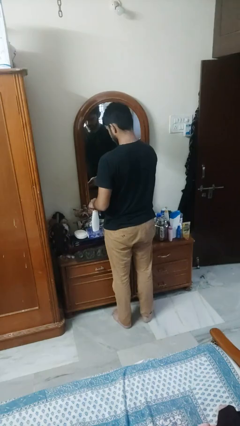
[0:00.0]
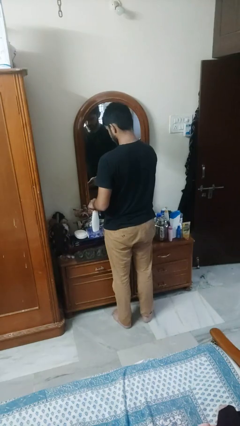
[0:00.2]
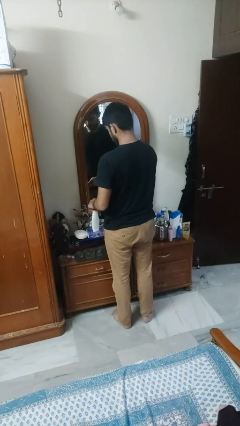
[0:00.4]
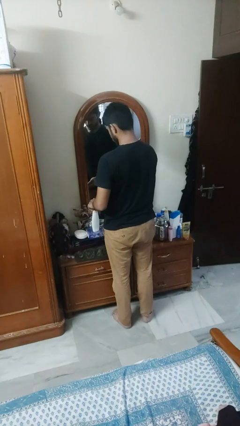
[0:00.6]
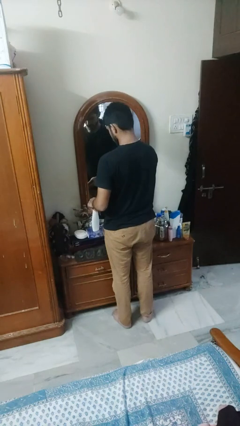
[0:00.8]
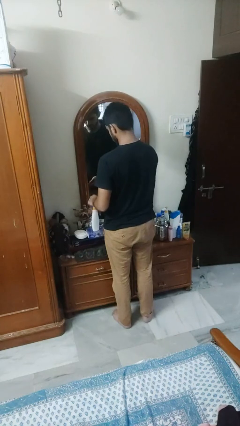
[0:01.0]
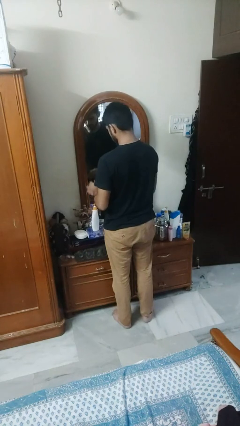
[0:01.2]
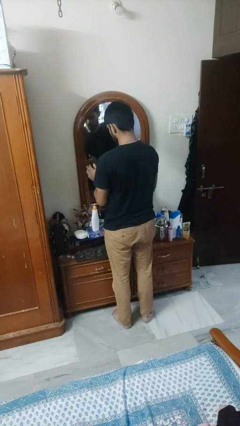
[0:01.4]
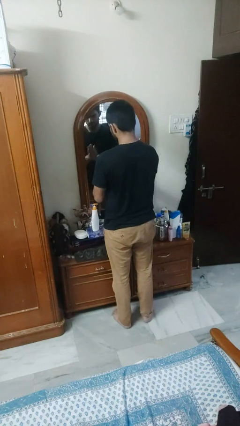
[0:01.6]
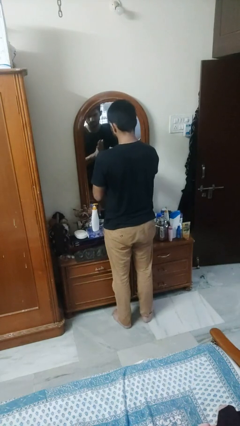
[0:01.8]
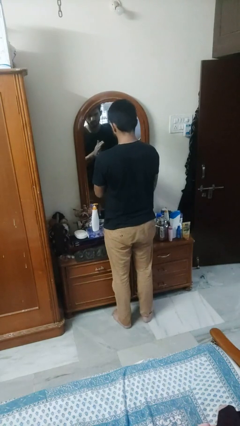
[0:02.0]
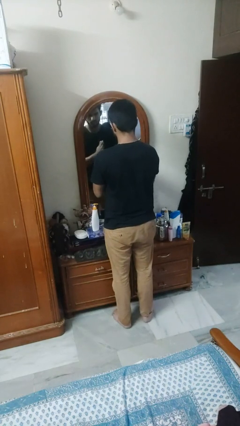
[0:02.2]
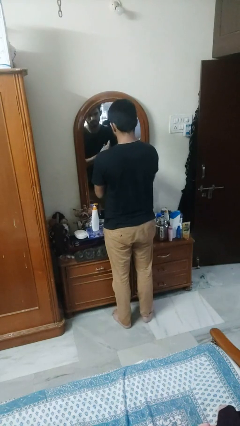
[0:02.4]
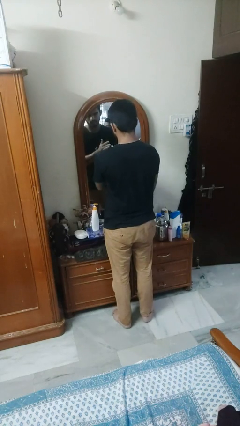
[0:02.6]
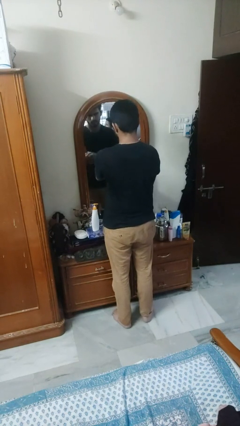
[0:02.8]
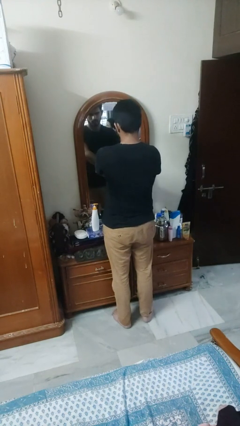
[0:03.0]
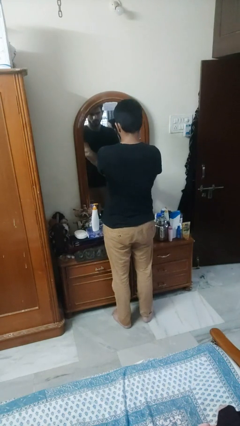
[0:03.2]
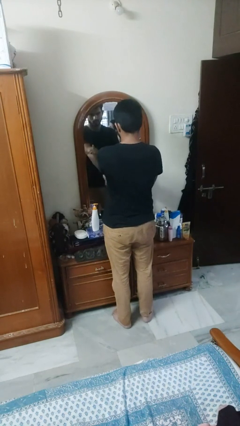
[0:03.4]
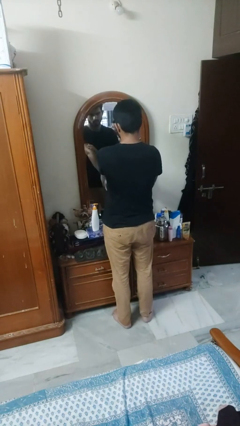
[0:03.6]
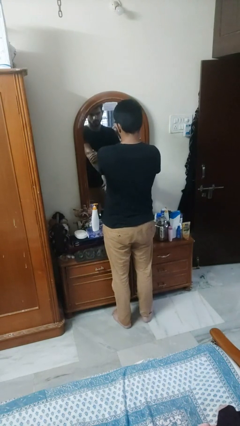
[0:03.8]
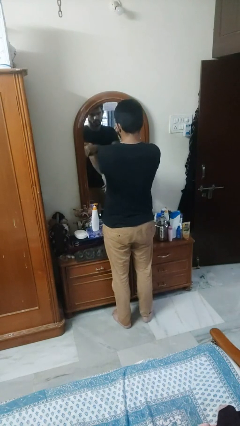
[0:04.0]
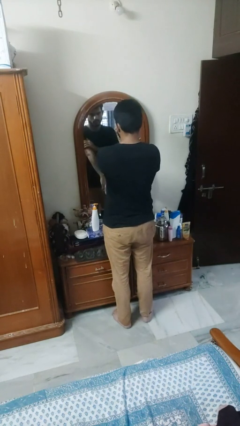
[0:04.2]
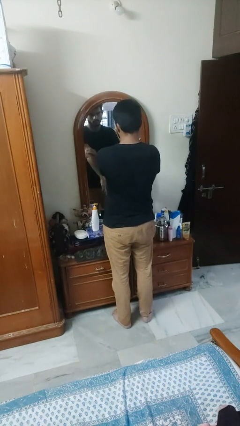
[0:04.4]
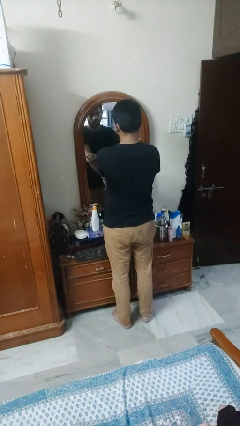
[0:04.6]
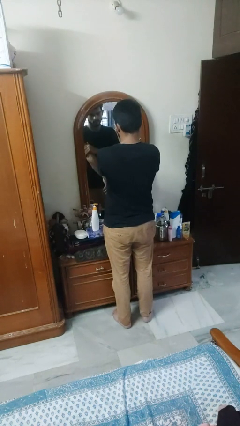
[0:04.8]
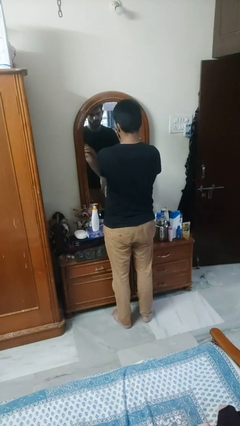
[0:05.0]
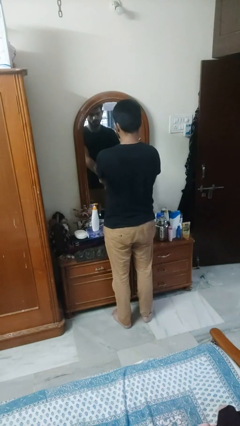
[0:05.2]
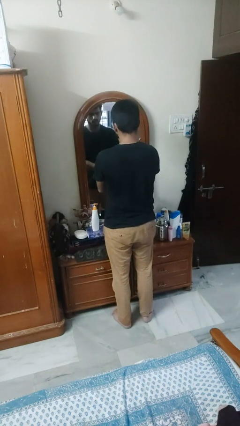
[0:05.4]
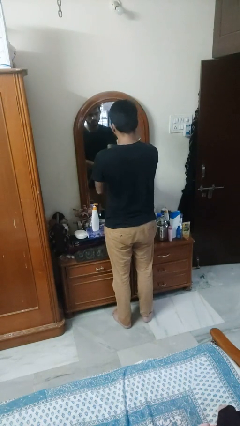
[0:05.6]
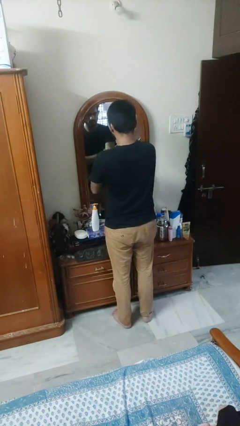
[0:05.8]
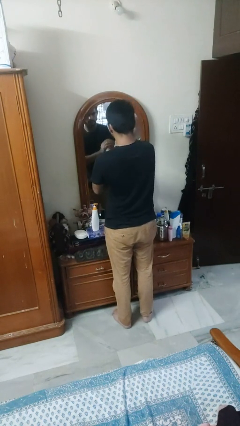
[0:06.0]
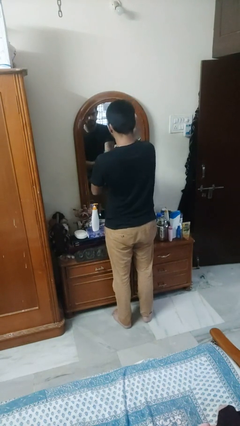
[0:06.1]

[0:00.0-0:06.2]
person applies facial moisturizer

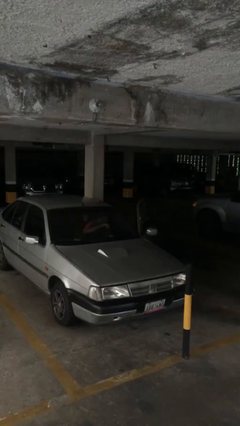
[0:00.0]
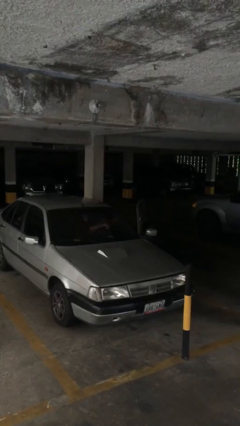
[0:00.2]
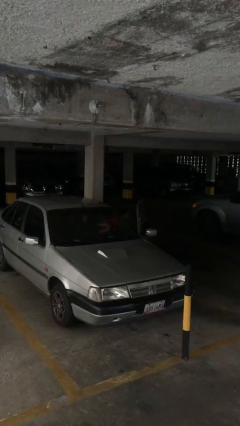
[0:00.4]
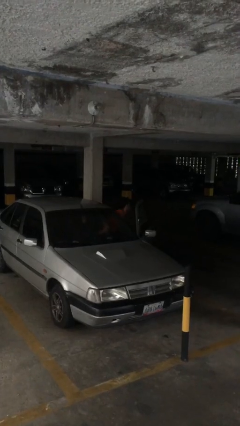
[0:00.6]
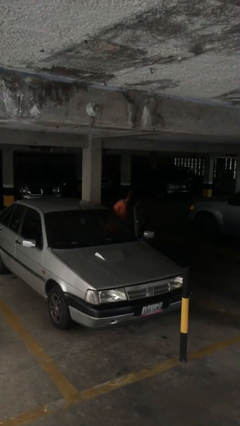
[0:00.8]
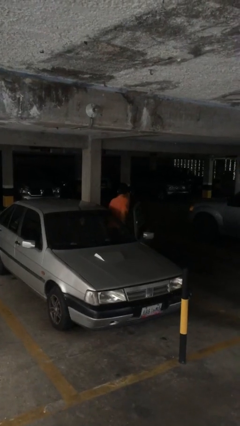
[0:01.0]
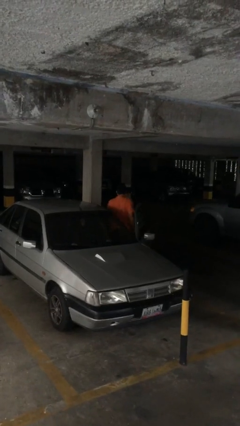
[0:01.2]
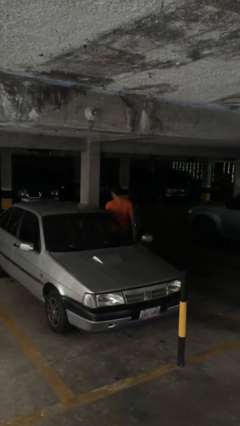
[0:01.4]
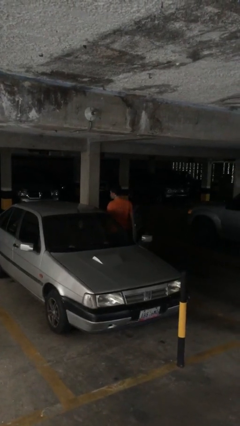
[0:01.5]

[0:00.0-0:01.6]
person exits car

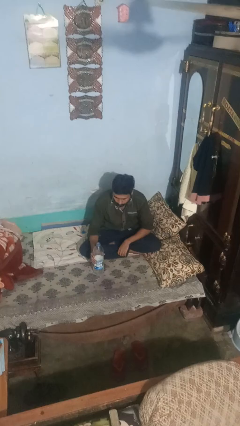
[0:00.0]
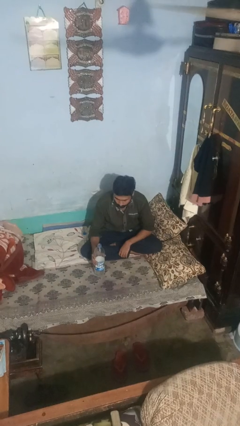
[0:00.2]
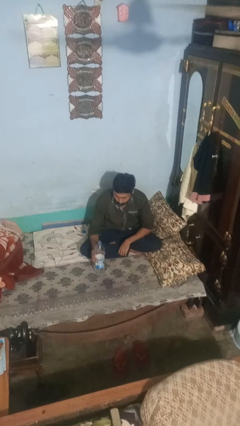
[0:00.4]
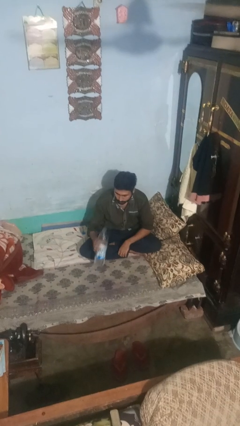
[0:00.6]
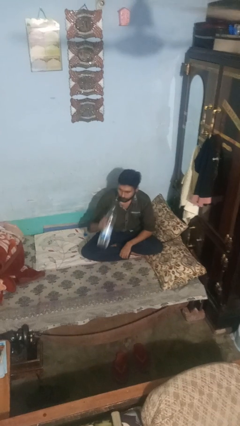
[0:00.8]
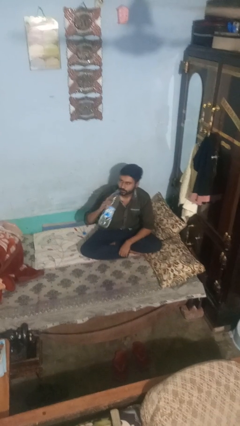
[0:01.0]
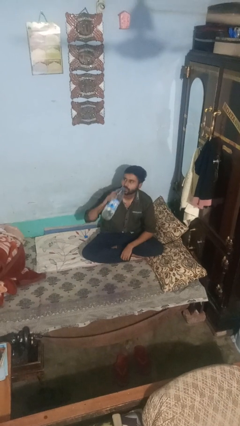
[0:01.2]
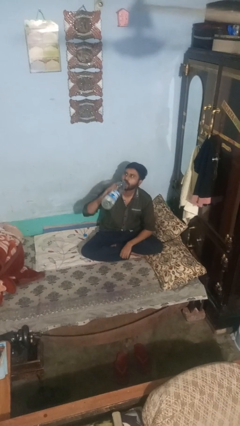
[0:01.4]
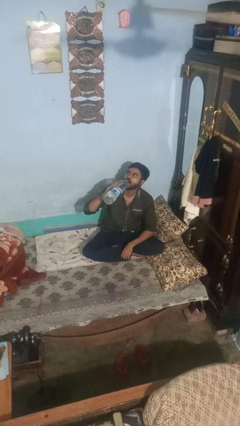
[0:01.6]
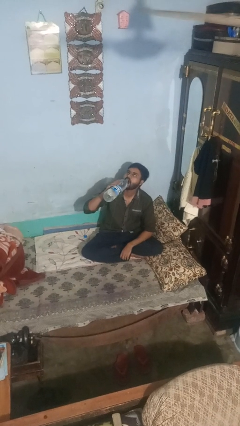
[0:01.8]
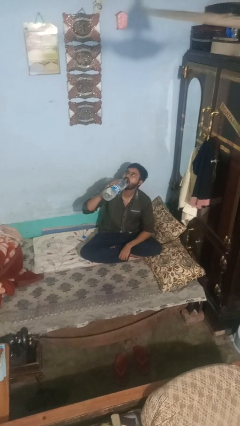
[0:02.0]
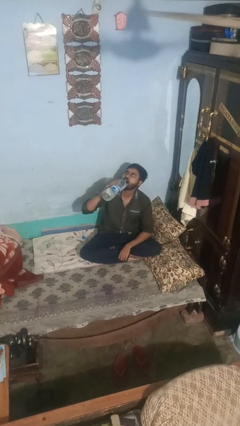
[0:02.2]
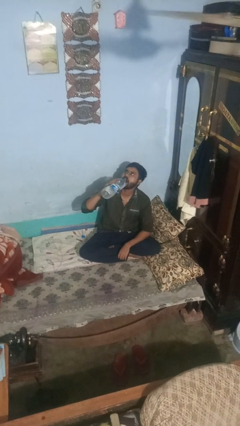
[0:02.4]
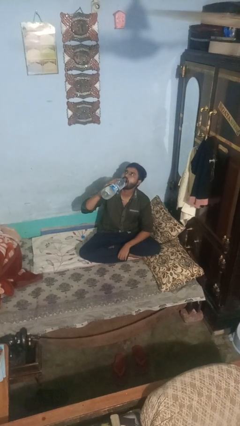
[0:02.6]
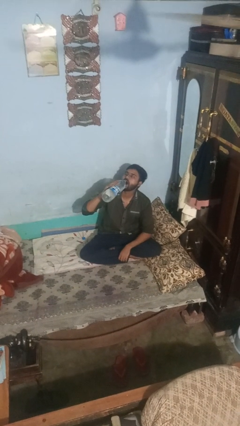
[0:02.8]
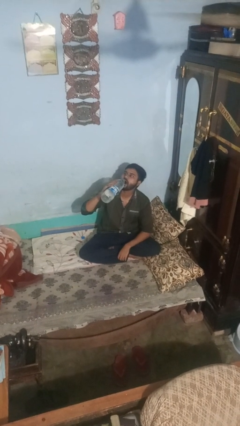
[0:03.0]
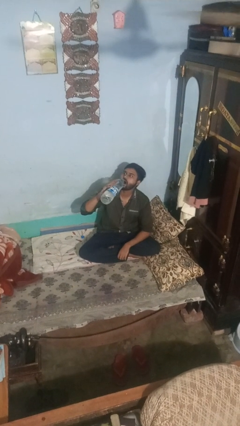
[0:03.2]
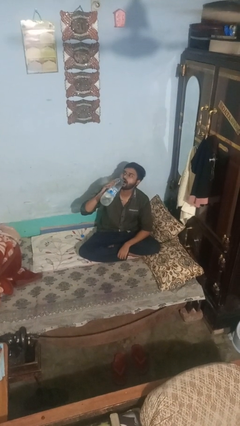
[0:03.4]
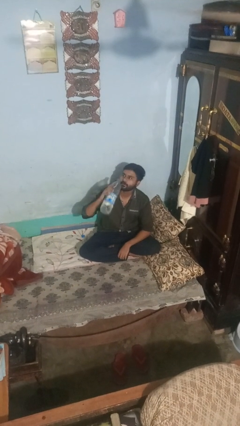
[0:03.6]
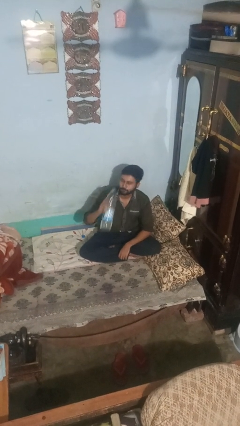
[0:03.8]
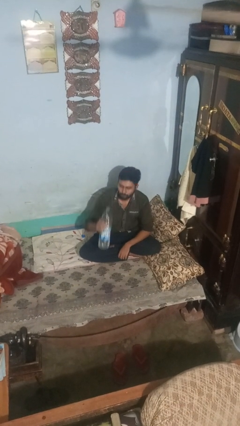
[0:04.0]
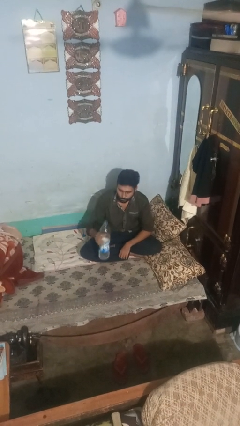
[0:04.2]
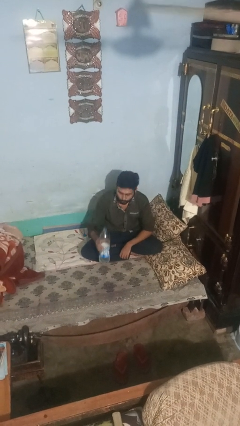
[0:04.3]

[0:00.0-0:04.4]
person drinks from bottle

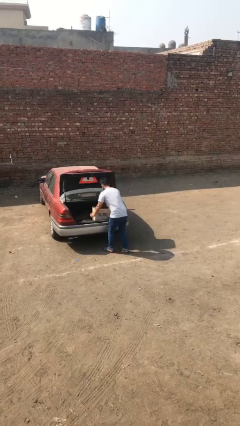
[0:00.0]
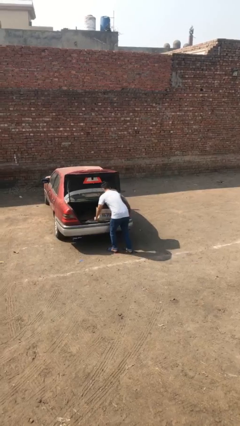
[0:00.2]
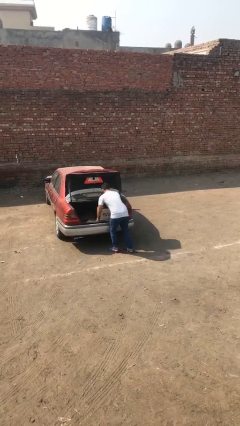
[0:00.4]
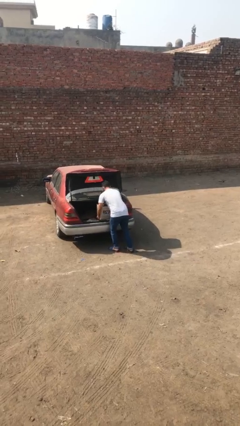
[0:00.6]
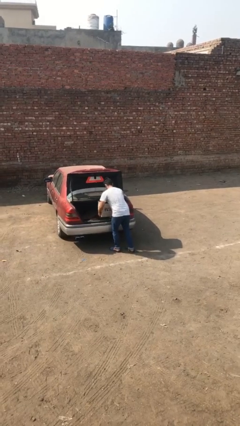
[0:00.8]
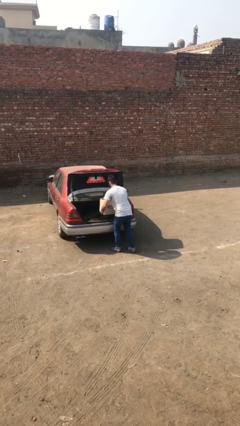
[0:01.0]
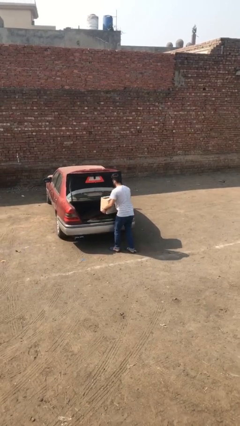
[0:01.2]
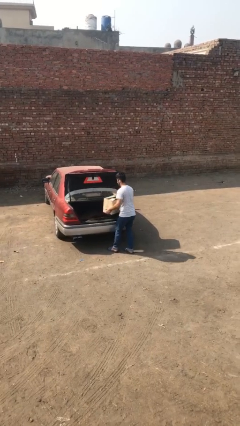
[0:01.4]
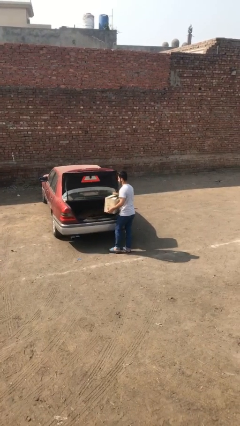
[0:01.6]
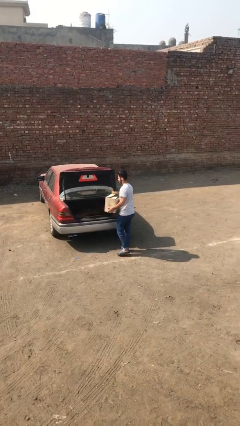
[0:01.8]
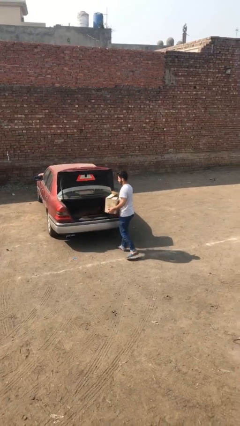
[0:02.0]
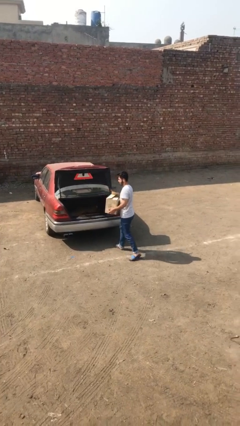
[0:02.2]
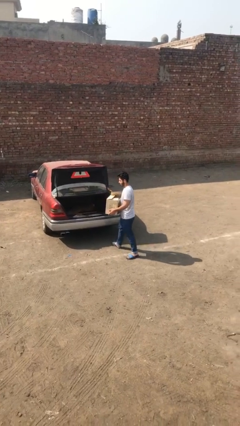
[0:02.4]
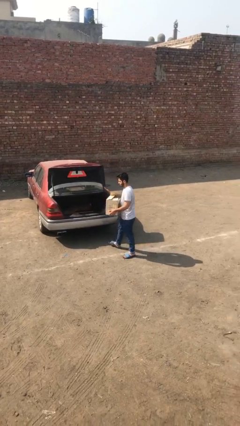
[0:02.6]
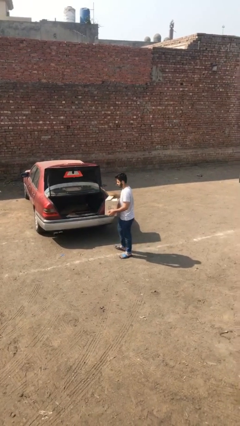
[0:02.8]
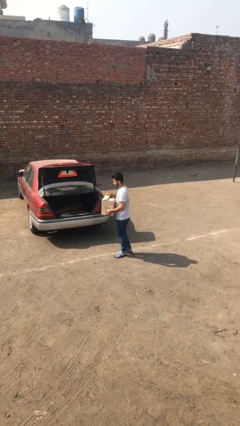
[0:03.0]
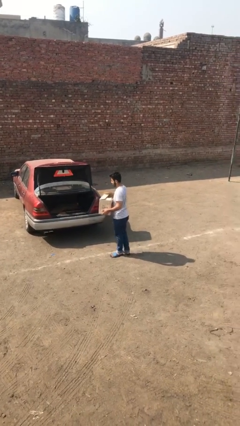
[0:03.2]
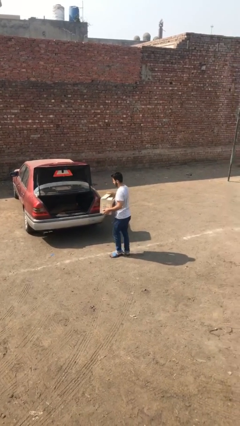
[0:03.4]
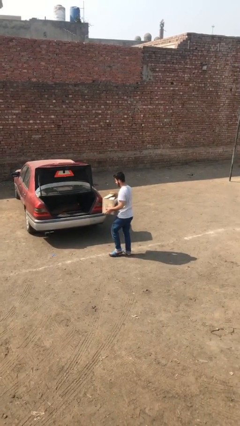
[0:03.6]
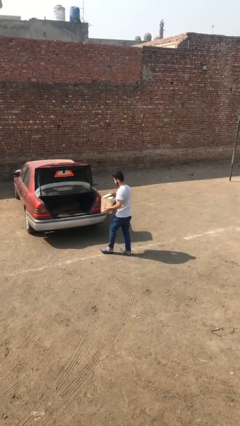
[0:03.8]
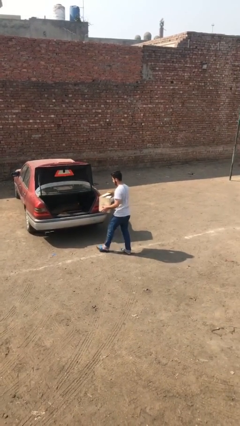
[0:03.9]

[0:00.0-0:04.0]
person unloads car

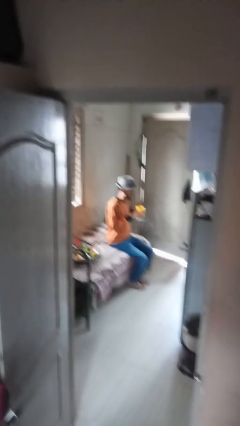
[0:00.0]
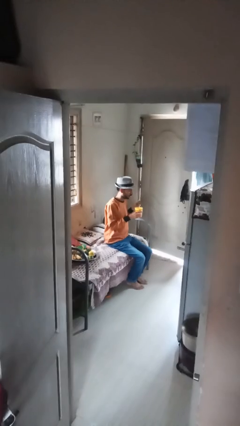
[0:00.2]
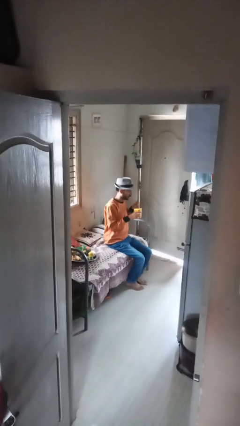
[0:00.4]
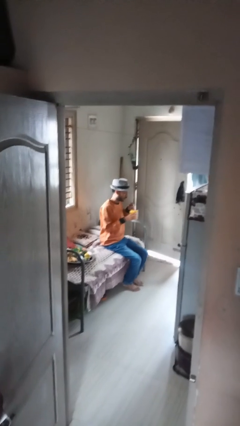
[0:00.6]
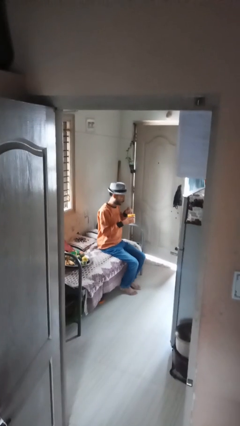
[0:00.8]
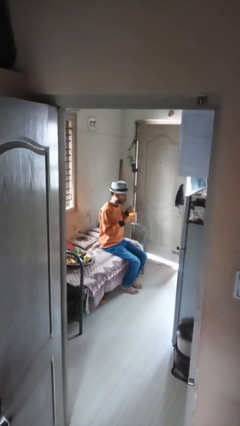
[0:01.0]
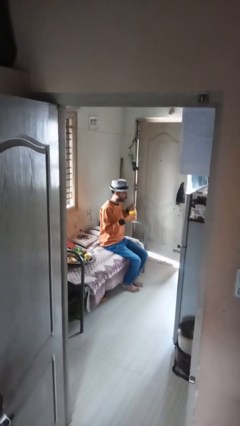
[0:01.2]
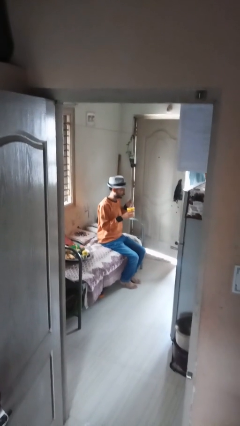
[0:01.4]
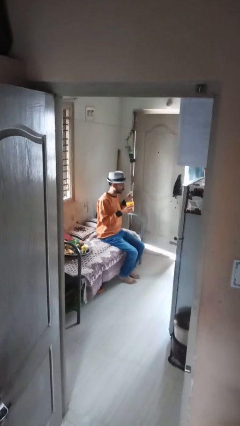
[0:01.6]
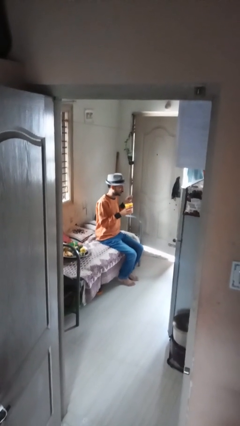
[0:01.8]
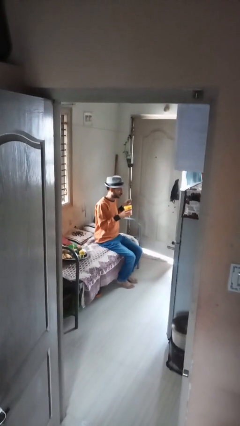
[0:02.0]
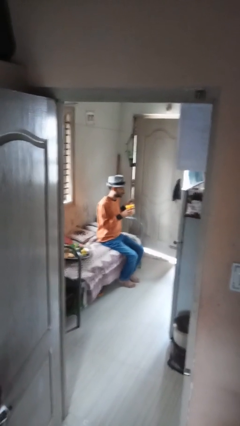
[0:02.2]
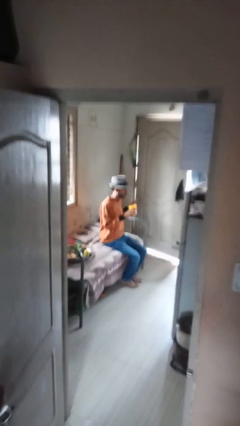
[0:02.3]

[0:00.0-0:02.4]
person stirs mug
